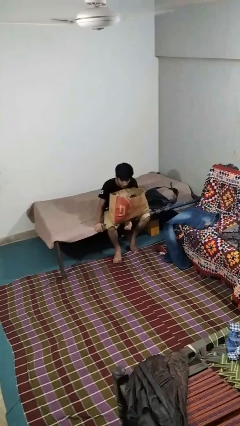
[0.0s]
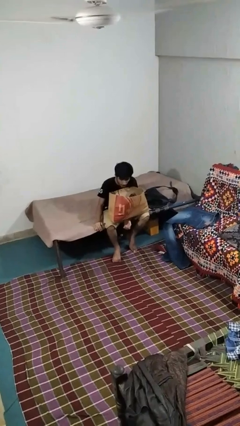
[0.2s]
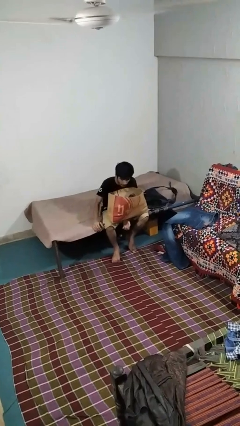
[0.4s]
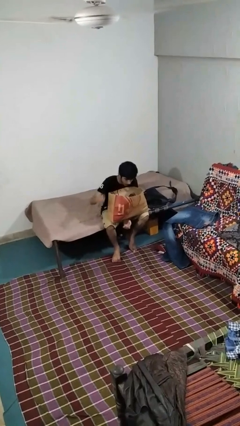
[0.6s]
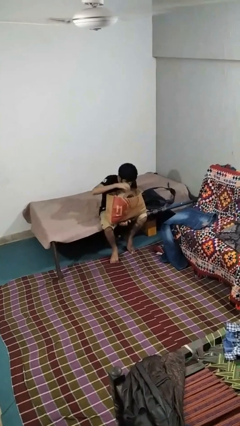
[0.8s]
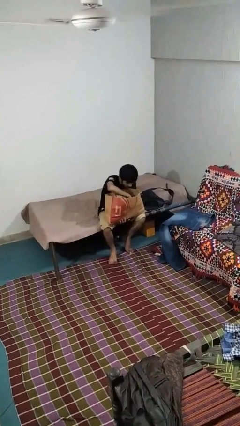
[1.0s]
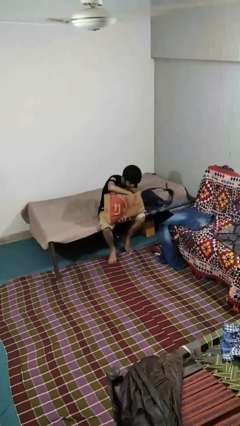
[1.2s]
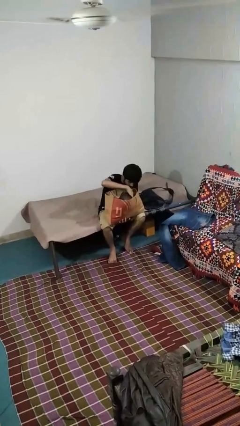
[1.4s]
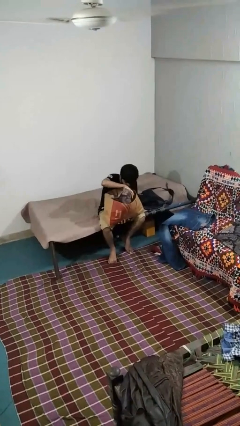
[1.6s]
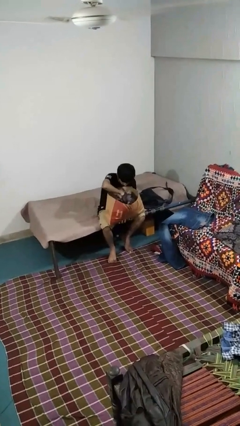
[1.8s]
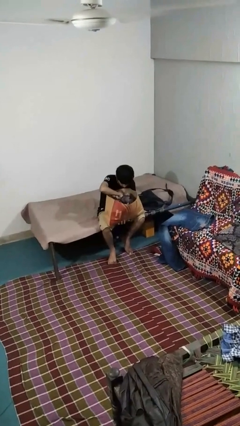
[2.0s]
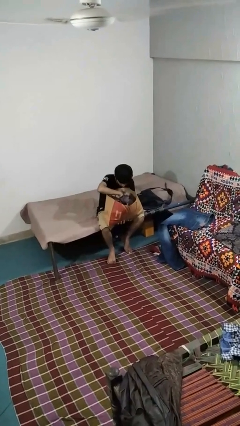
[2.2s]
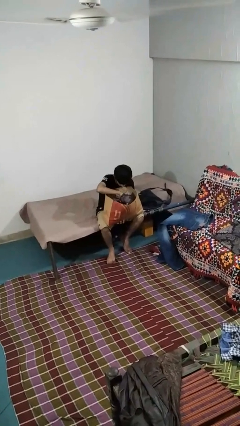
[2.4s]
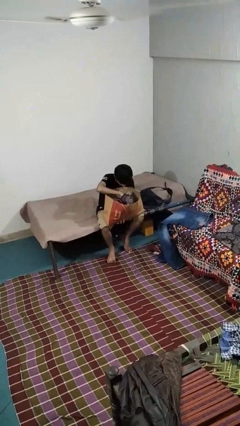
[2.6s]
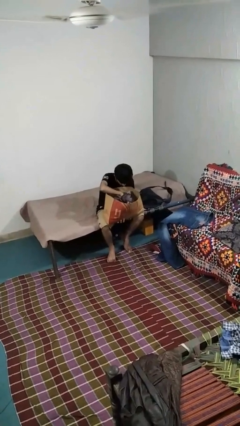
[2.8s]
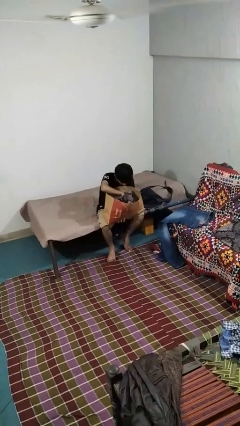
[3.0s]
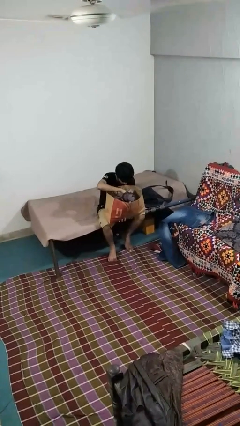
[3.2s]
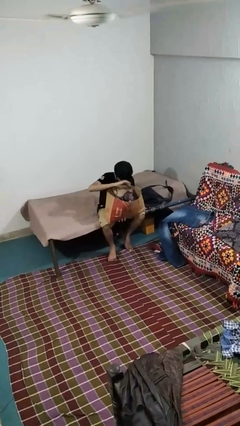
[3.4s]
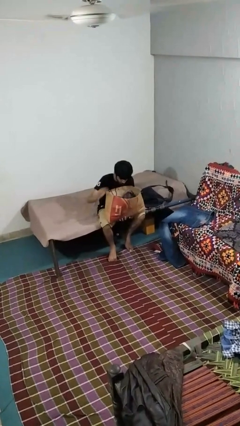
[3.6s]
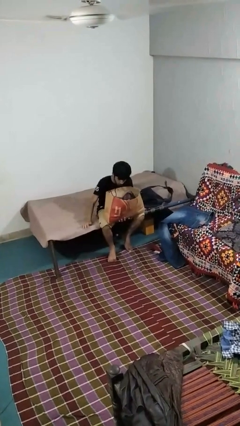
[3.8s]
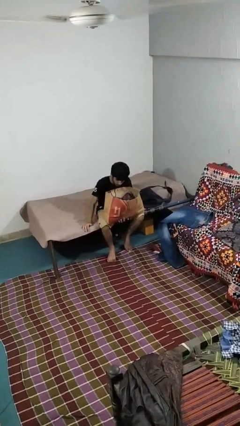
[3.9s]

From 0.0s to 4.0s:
person searches in bag

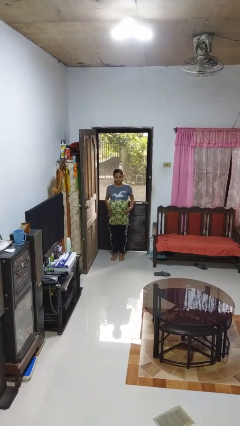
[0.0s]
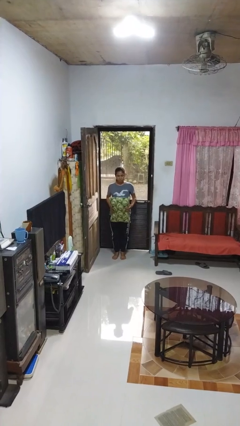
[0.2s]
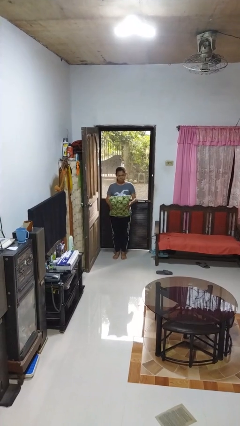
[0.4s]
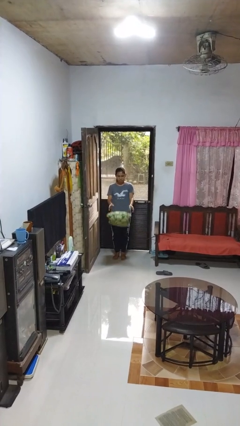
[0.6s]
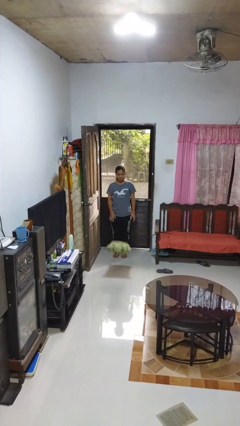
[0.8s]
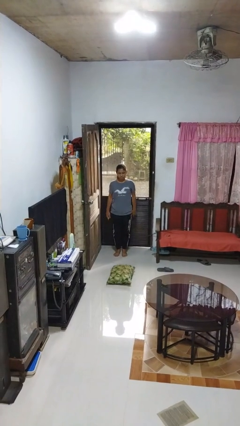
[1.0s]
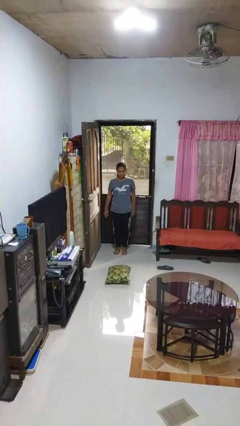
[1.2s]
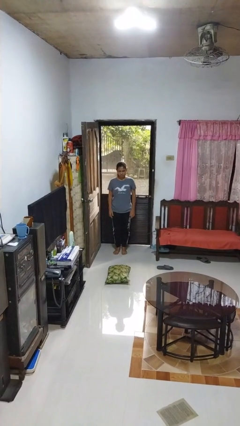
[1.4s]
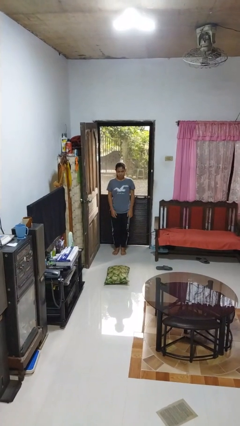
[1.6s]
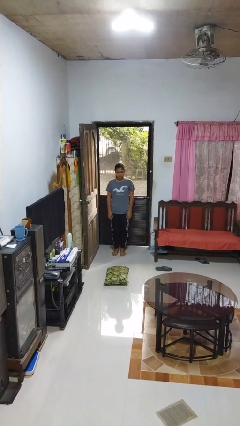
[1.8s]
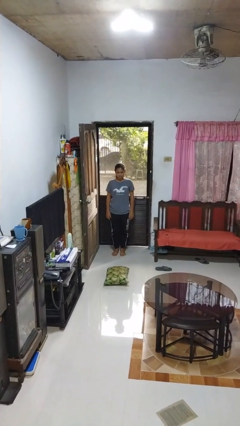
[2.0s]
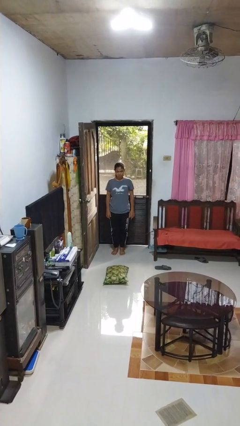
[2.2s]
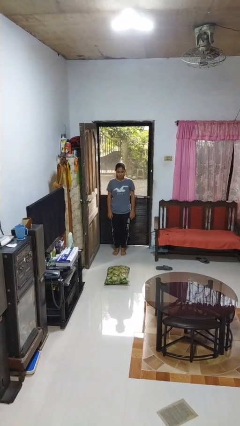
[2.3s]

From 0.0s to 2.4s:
person throws object into air

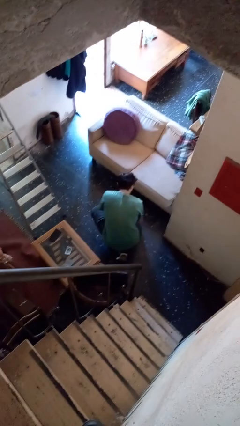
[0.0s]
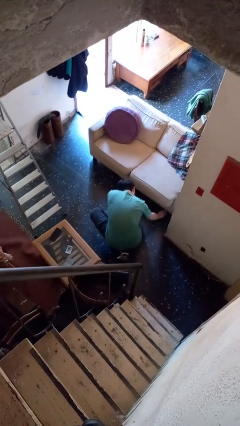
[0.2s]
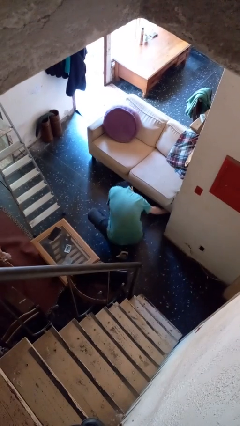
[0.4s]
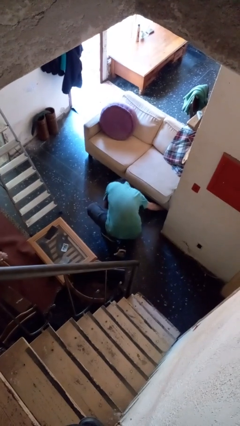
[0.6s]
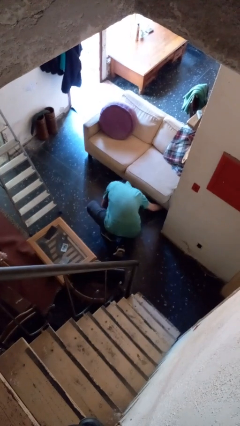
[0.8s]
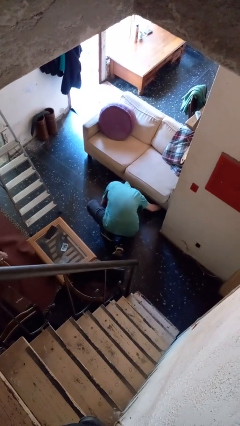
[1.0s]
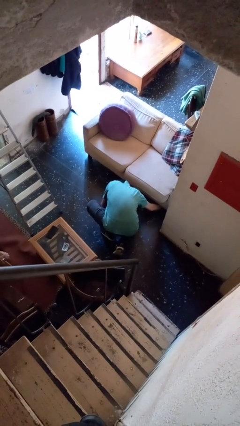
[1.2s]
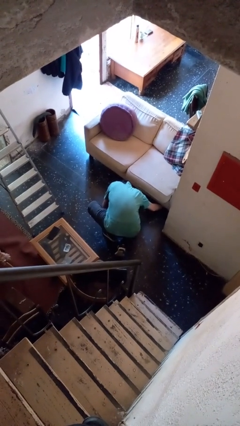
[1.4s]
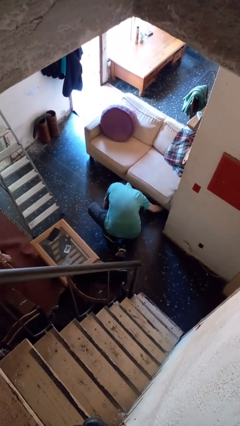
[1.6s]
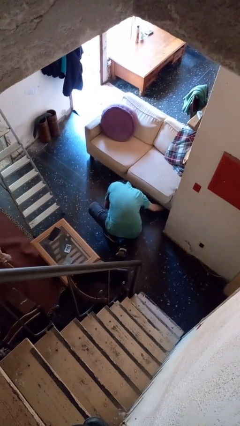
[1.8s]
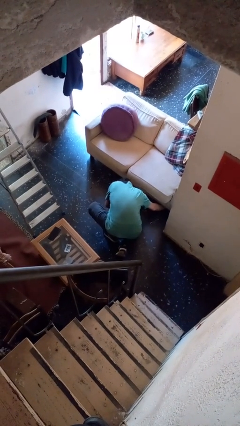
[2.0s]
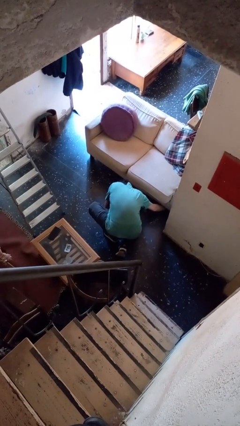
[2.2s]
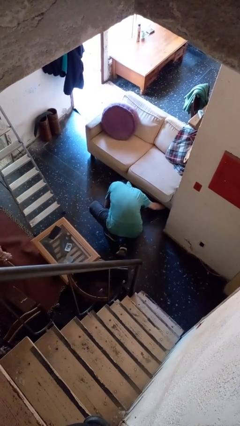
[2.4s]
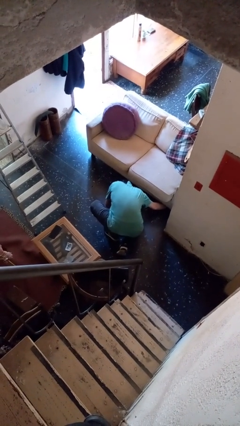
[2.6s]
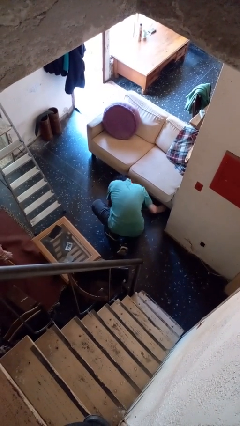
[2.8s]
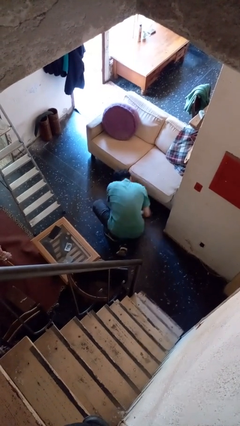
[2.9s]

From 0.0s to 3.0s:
person searches under couch

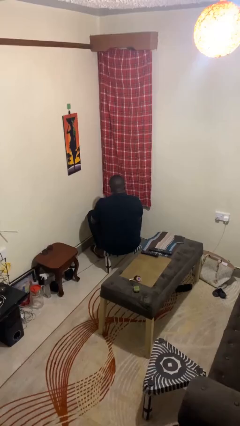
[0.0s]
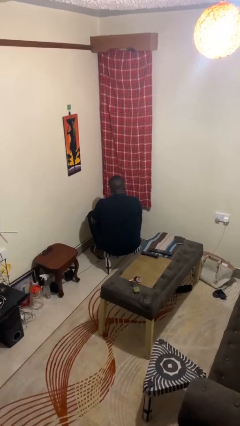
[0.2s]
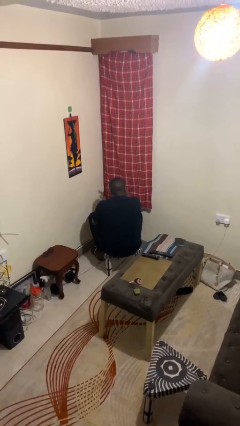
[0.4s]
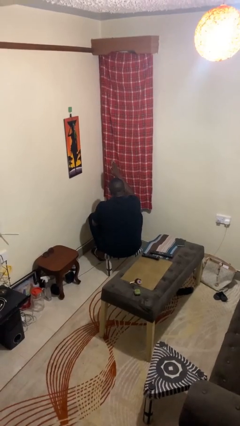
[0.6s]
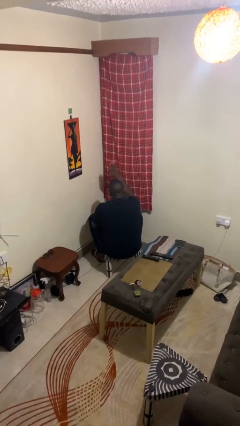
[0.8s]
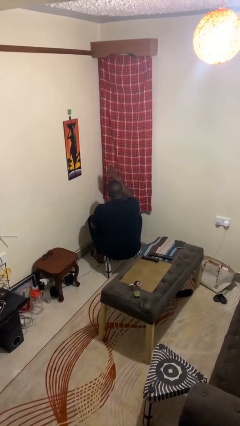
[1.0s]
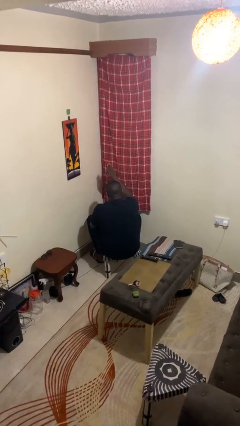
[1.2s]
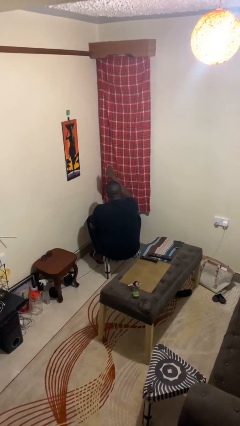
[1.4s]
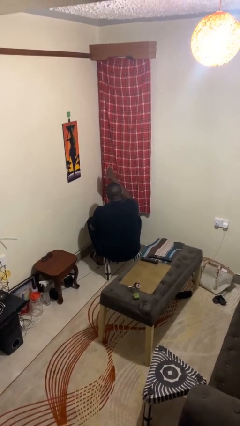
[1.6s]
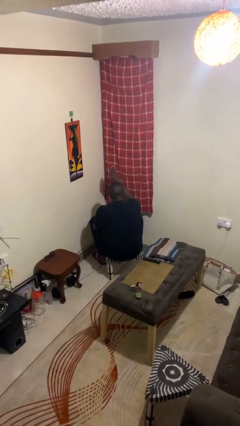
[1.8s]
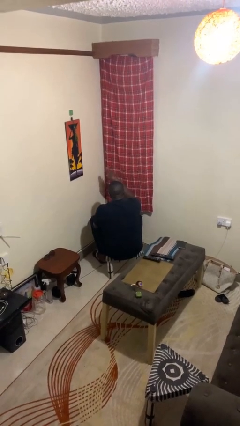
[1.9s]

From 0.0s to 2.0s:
person gestures swipe up

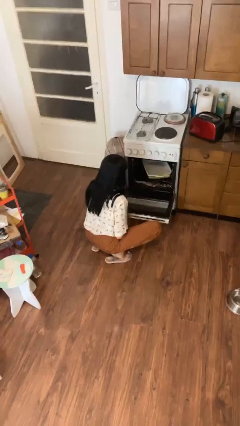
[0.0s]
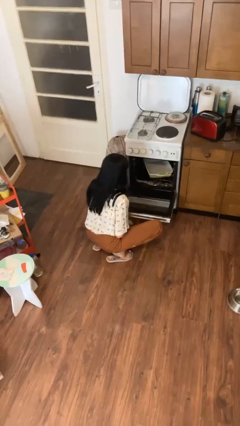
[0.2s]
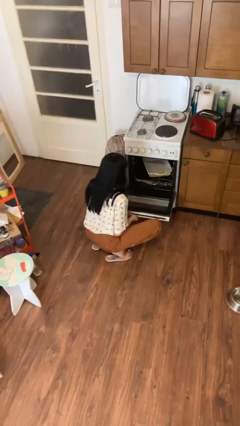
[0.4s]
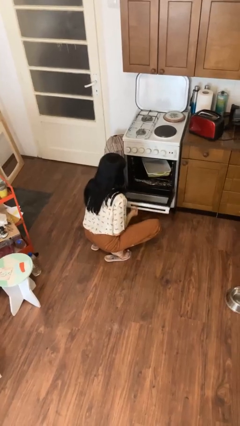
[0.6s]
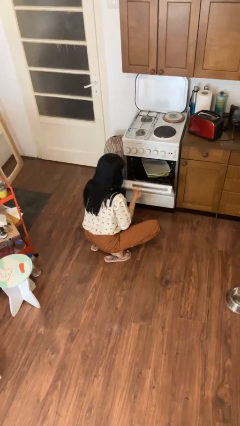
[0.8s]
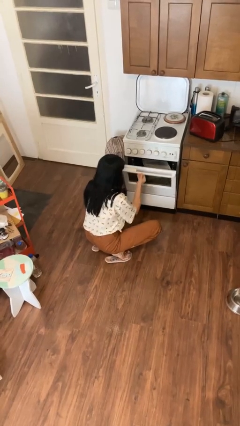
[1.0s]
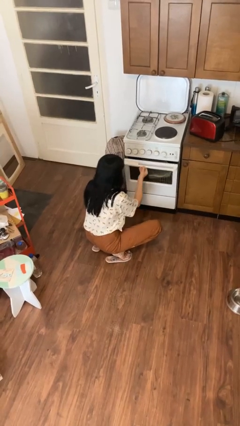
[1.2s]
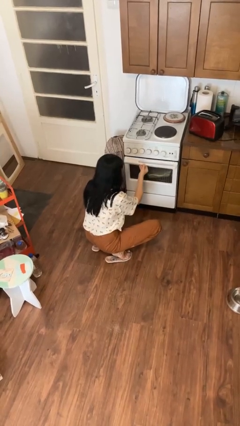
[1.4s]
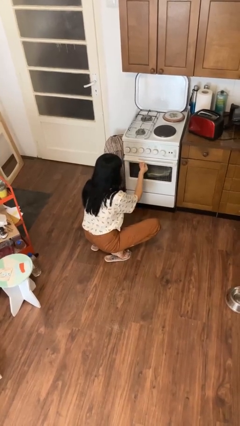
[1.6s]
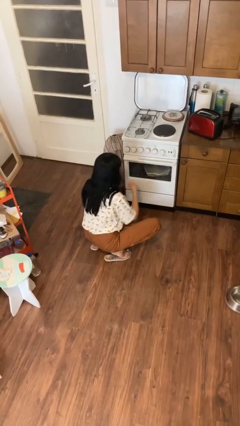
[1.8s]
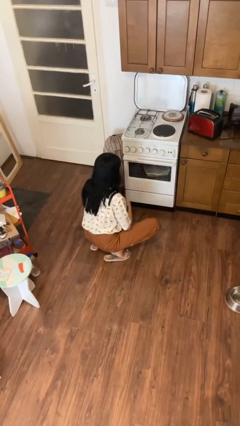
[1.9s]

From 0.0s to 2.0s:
person closes oven door

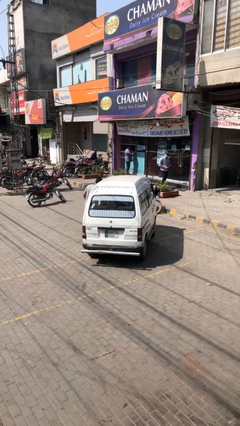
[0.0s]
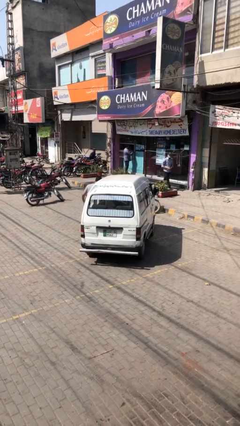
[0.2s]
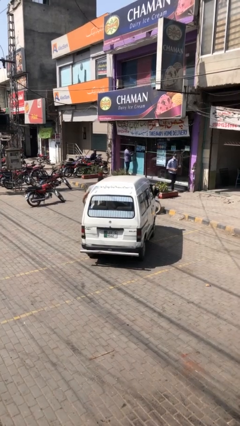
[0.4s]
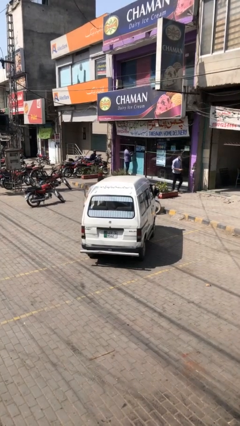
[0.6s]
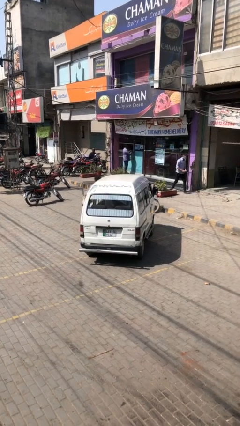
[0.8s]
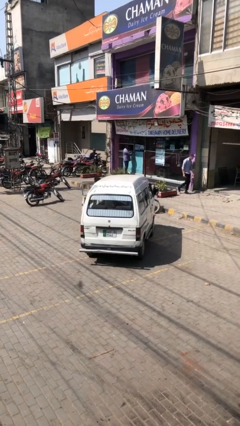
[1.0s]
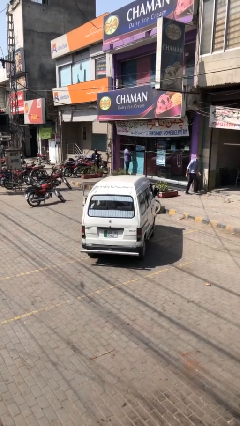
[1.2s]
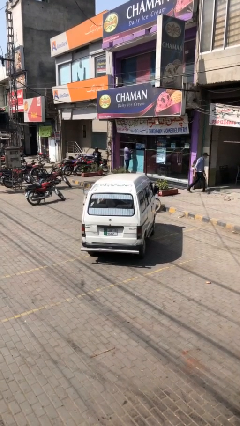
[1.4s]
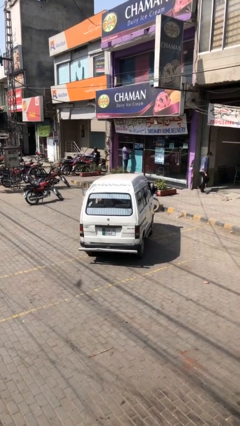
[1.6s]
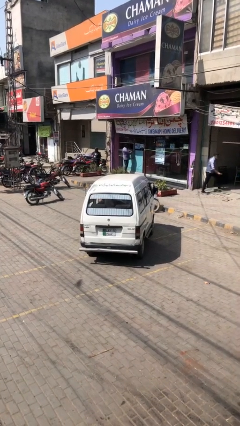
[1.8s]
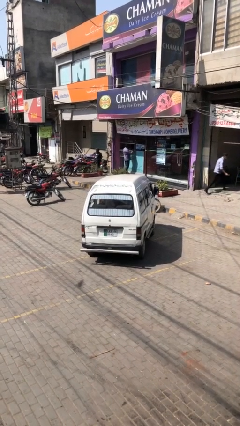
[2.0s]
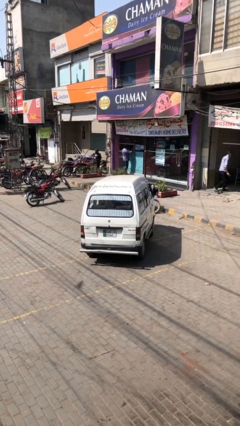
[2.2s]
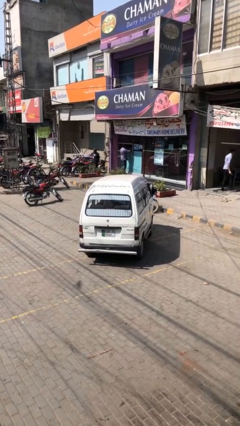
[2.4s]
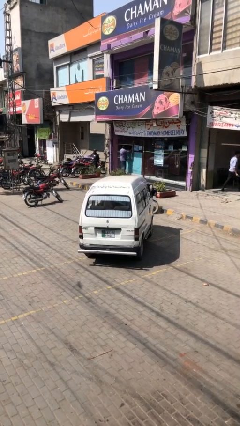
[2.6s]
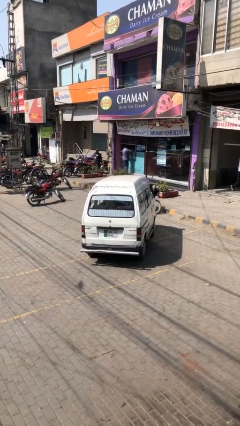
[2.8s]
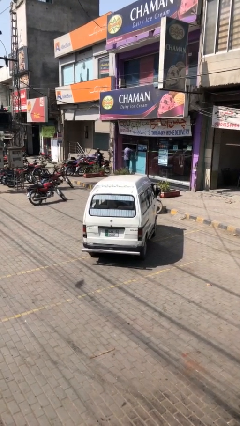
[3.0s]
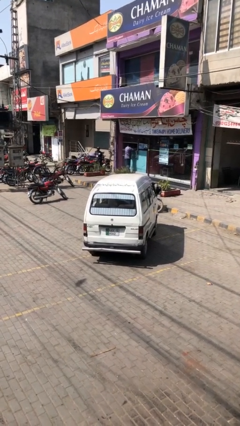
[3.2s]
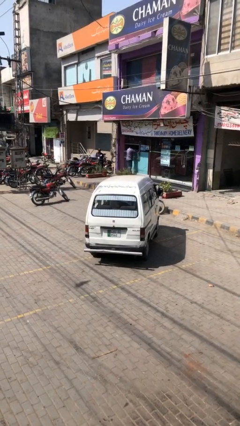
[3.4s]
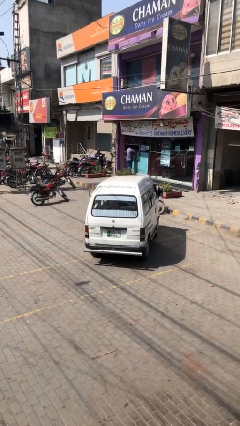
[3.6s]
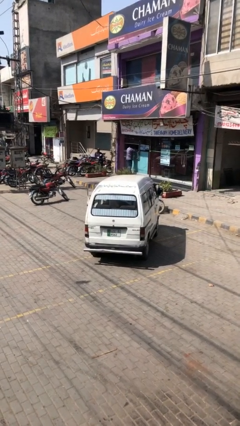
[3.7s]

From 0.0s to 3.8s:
car picks up person

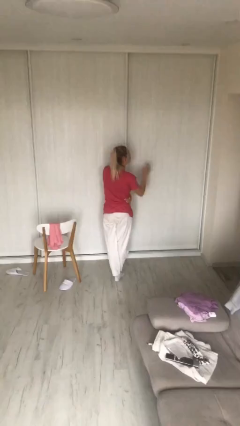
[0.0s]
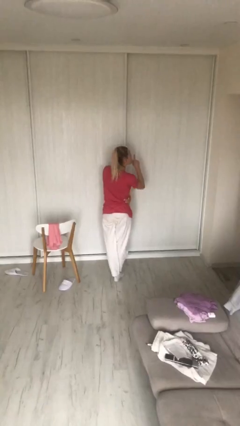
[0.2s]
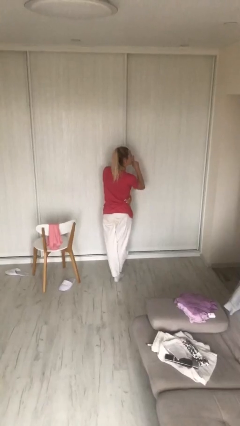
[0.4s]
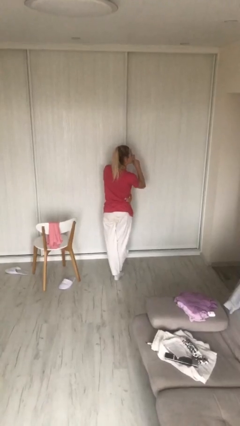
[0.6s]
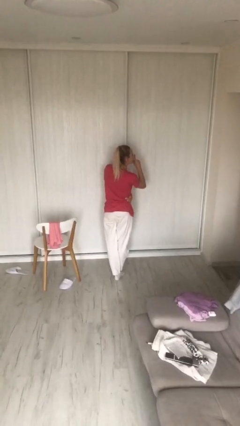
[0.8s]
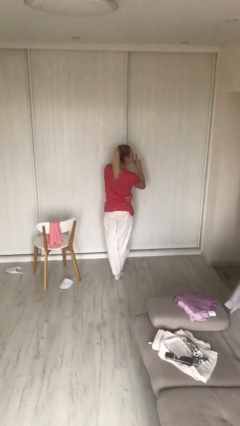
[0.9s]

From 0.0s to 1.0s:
person gestures be quiet
